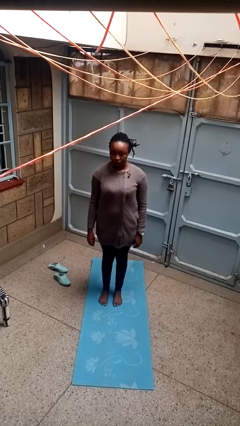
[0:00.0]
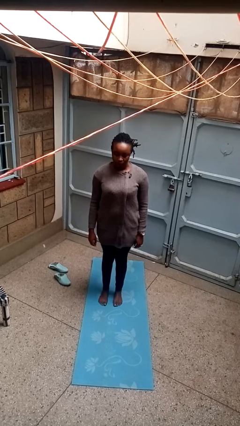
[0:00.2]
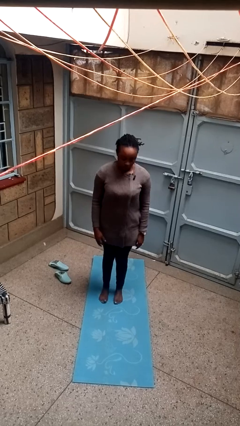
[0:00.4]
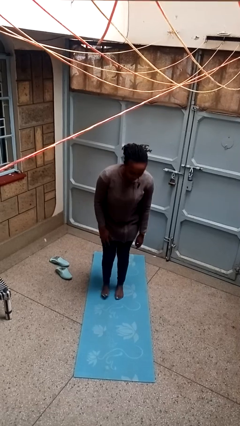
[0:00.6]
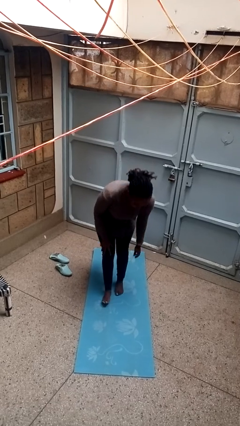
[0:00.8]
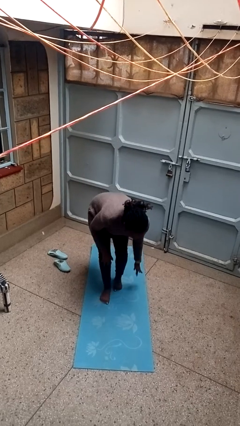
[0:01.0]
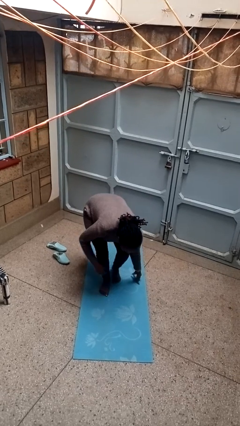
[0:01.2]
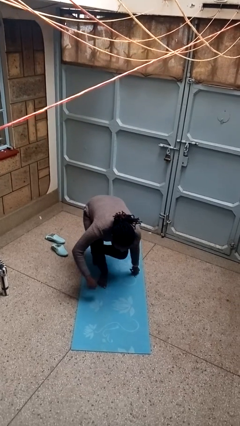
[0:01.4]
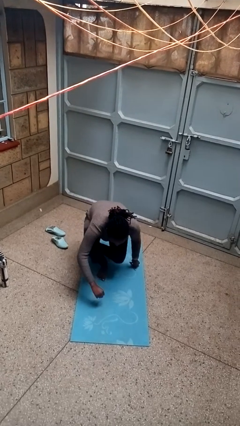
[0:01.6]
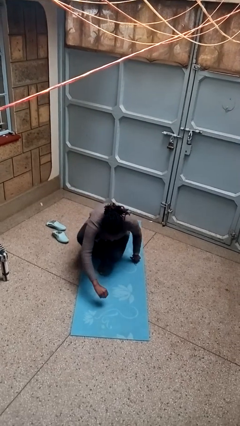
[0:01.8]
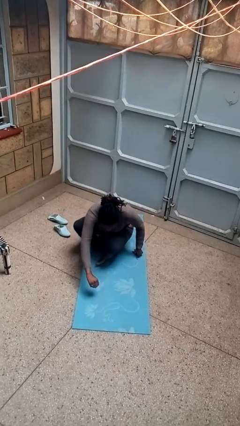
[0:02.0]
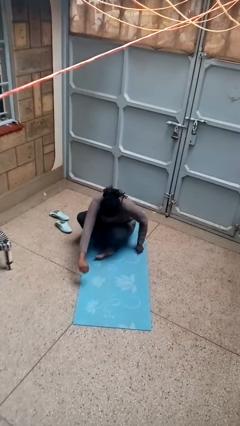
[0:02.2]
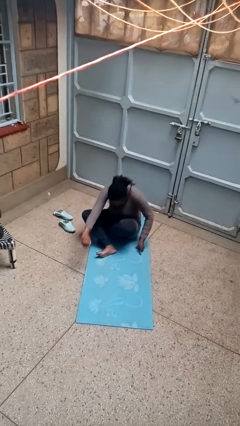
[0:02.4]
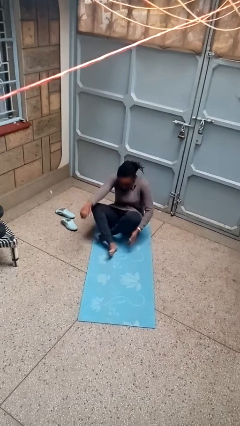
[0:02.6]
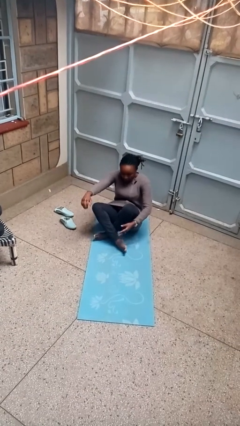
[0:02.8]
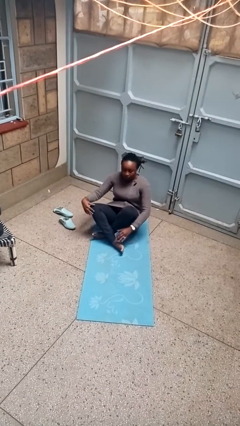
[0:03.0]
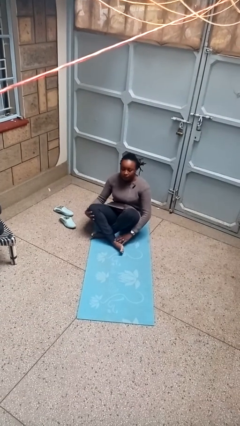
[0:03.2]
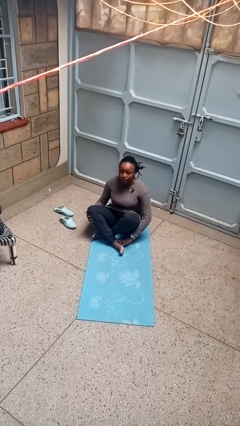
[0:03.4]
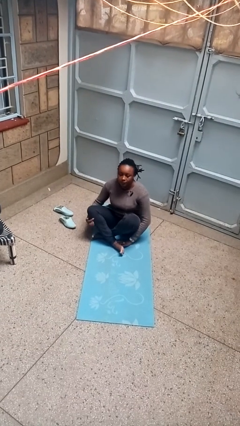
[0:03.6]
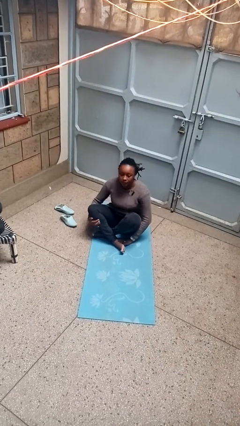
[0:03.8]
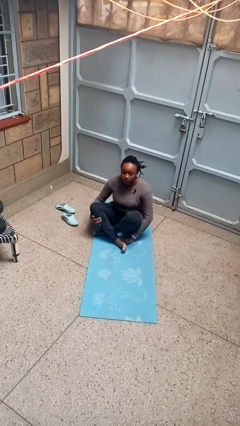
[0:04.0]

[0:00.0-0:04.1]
person sits crisscross

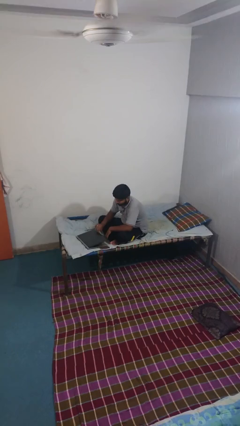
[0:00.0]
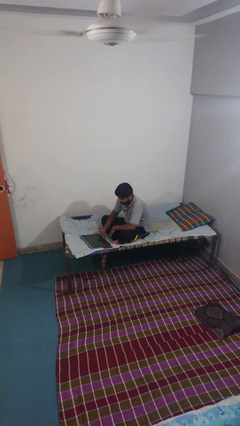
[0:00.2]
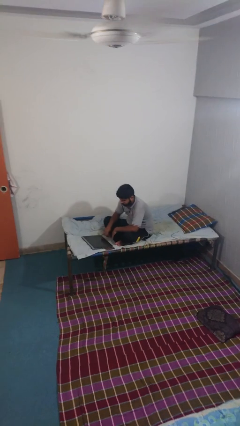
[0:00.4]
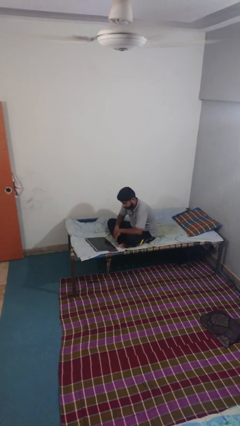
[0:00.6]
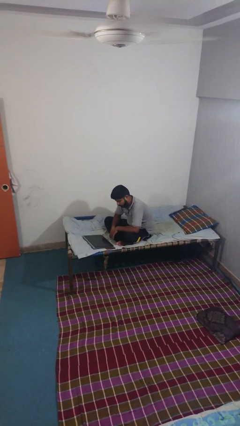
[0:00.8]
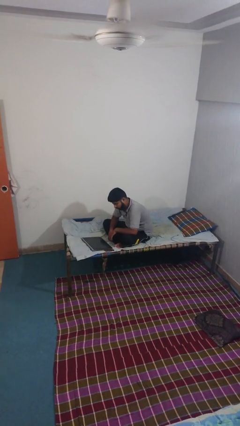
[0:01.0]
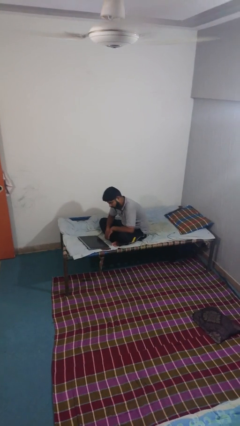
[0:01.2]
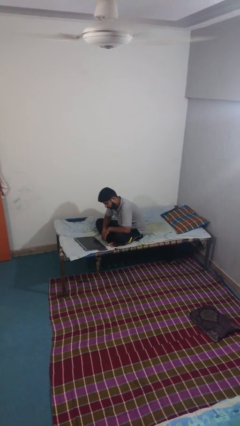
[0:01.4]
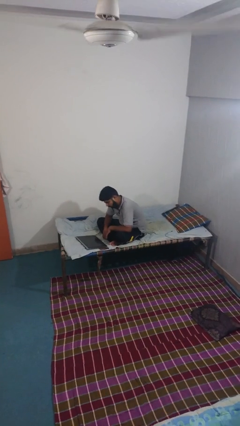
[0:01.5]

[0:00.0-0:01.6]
person closes laptop

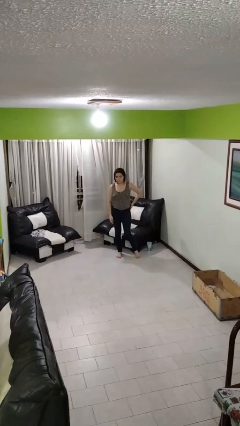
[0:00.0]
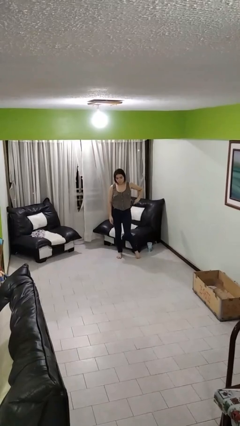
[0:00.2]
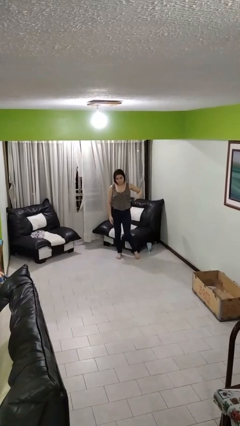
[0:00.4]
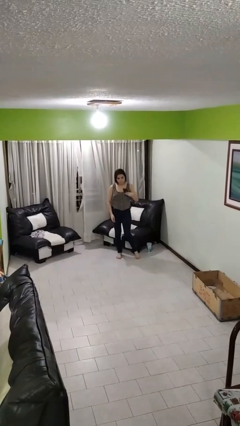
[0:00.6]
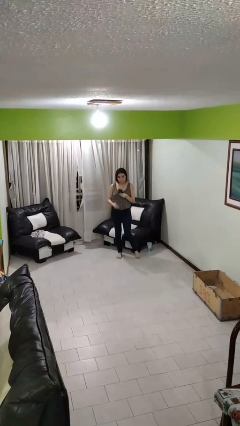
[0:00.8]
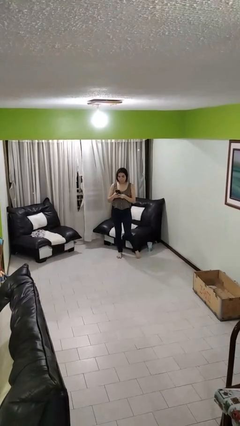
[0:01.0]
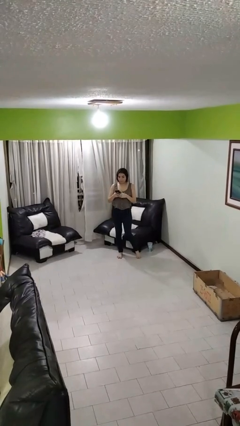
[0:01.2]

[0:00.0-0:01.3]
person takes phone from pocket

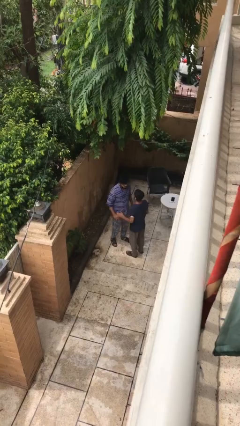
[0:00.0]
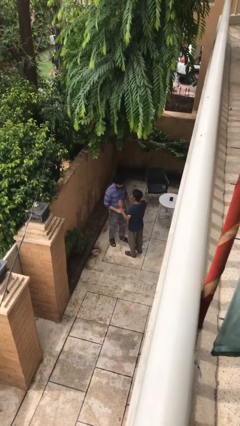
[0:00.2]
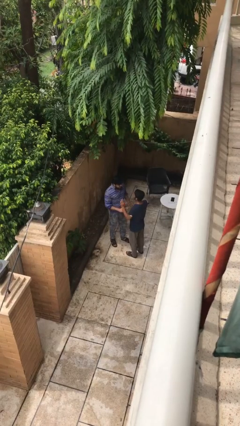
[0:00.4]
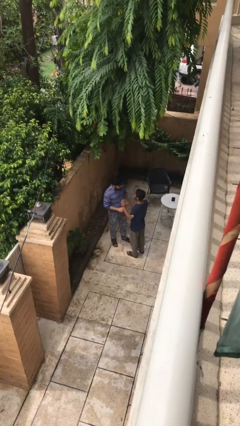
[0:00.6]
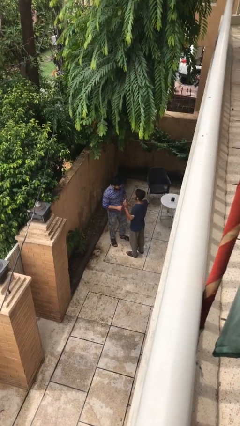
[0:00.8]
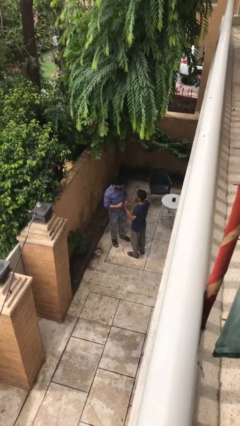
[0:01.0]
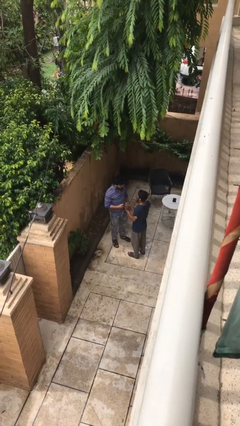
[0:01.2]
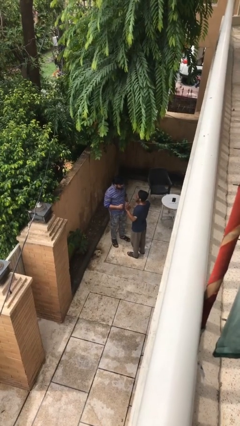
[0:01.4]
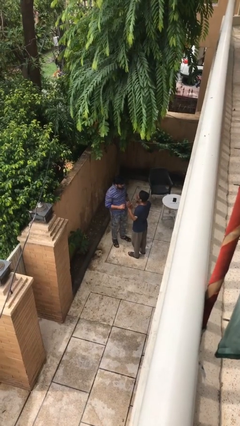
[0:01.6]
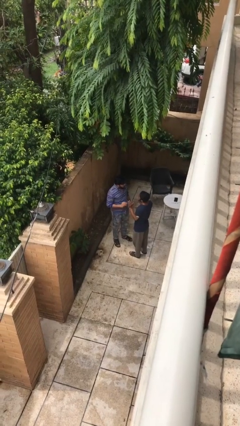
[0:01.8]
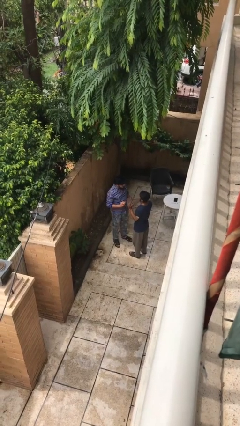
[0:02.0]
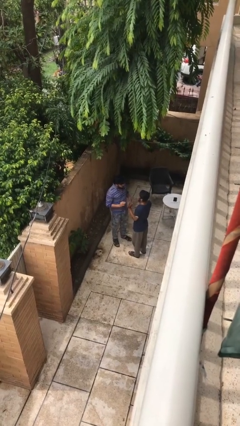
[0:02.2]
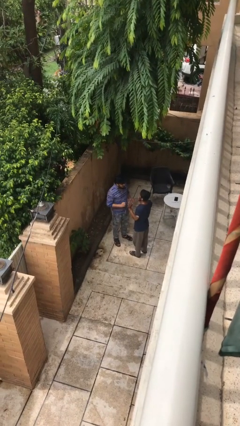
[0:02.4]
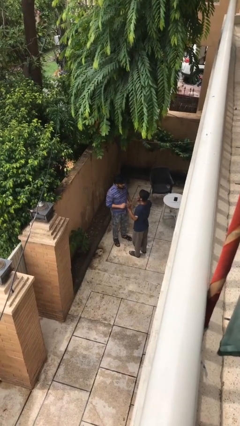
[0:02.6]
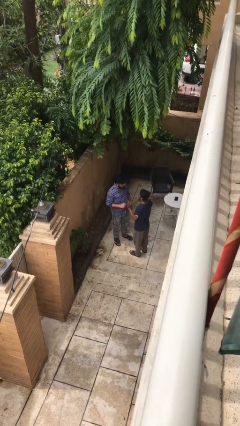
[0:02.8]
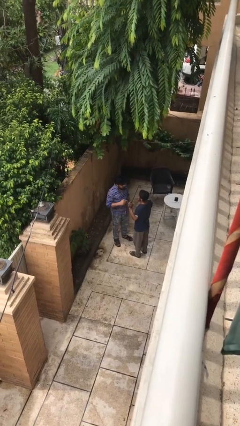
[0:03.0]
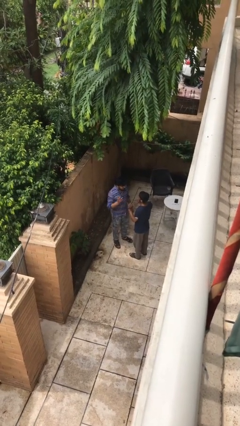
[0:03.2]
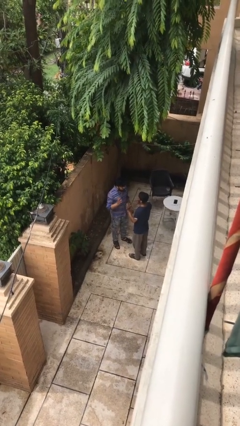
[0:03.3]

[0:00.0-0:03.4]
person talks to person

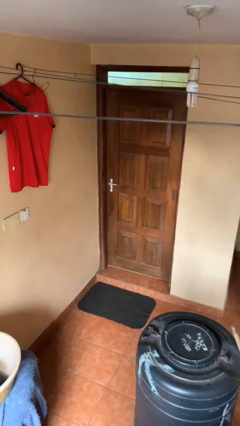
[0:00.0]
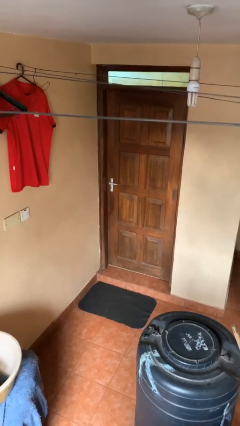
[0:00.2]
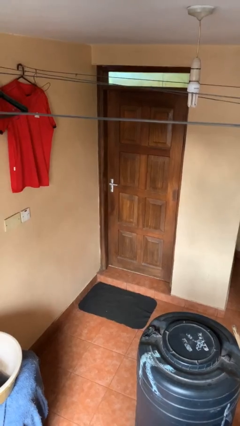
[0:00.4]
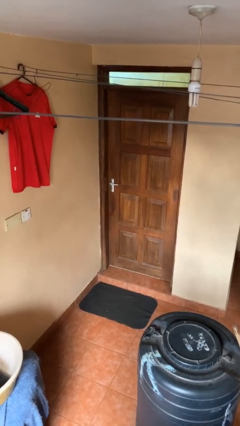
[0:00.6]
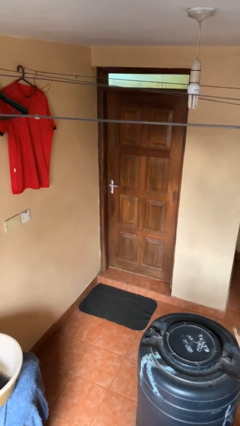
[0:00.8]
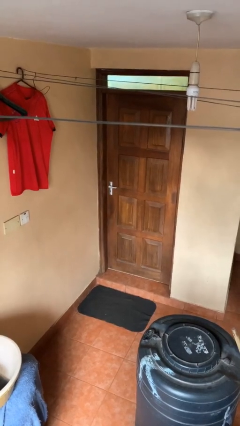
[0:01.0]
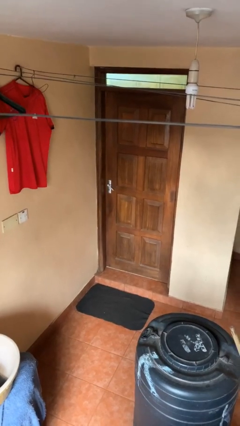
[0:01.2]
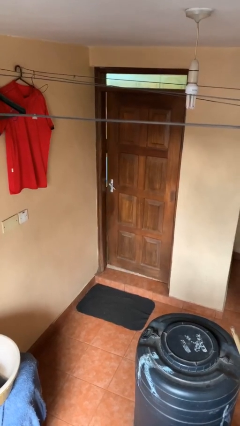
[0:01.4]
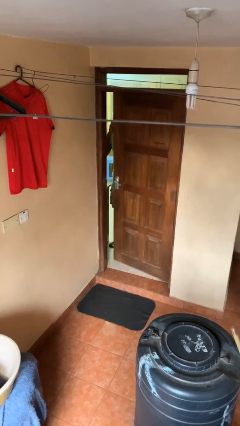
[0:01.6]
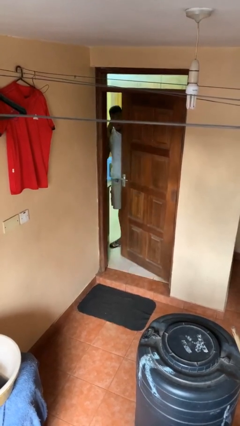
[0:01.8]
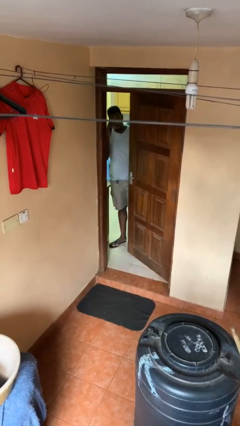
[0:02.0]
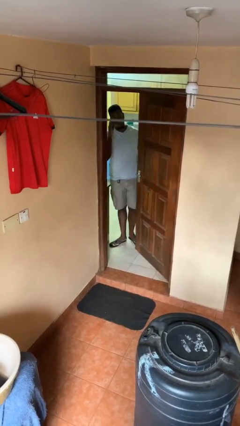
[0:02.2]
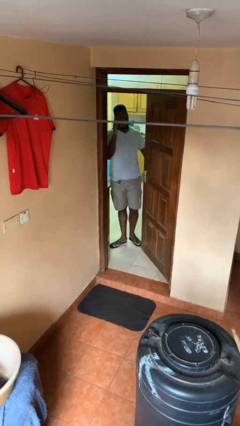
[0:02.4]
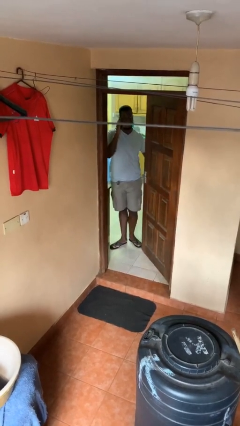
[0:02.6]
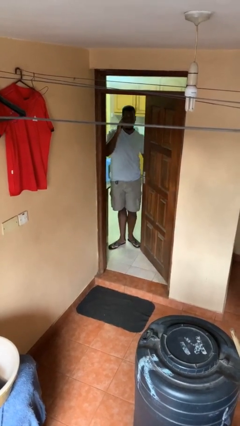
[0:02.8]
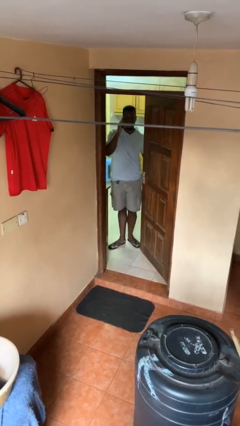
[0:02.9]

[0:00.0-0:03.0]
person opens facility door

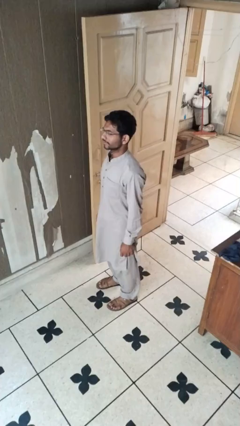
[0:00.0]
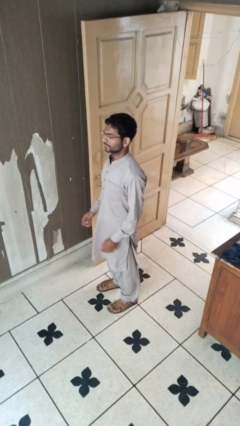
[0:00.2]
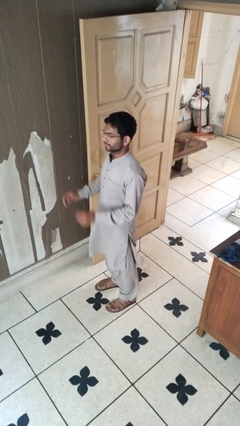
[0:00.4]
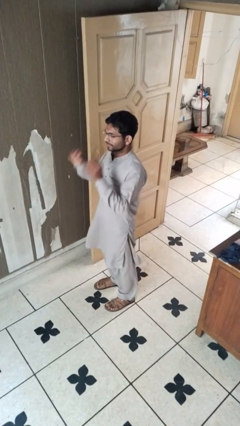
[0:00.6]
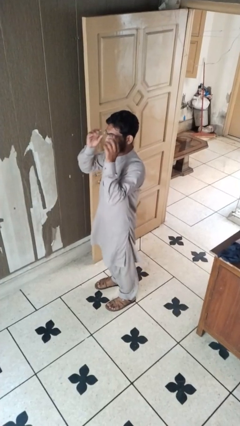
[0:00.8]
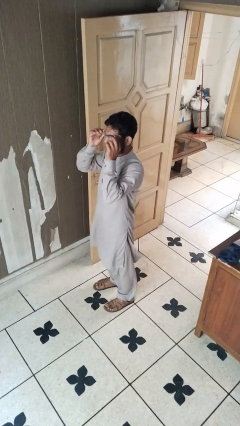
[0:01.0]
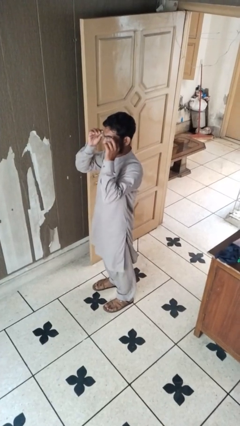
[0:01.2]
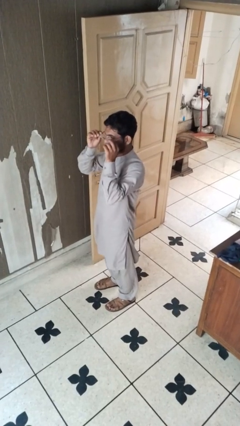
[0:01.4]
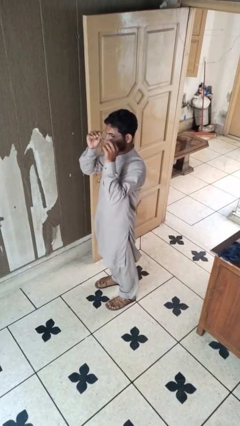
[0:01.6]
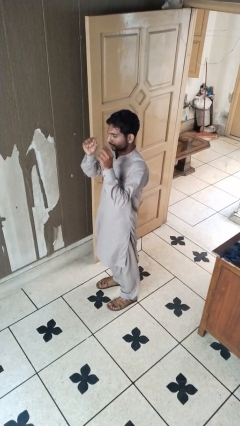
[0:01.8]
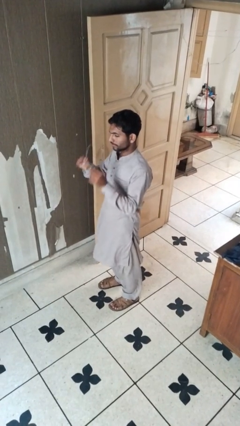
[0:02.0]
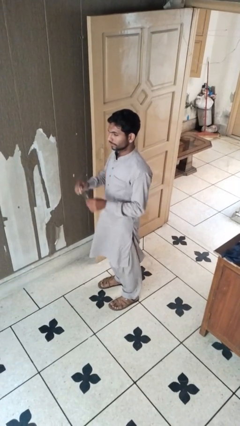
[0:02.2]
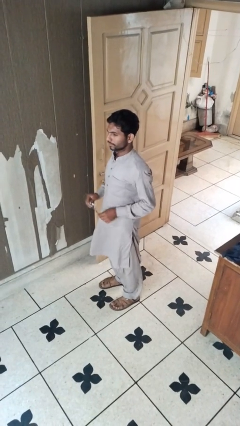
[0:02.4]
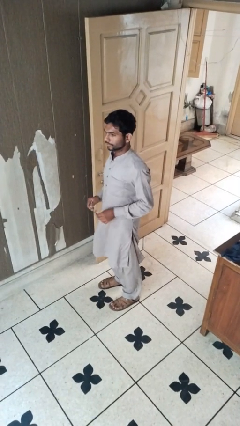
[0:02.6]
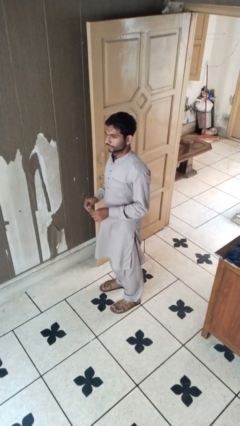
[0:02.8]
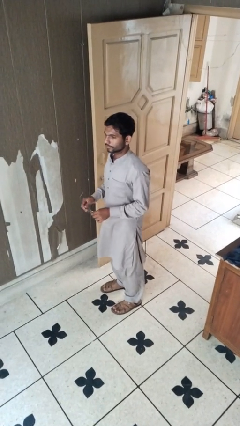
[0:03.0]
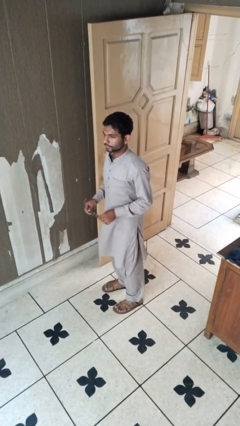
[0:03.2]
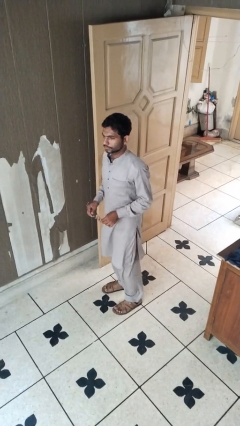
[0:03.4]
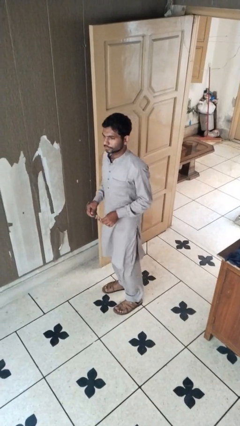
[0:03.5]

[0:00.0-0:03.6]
person takes off glasses

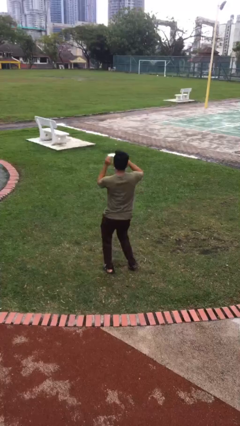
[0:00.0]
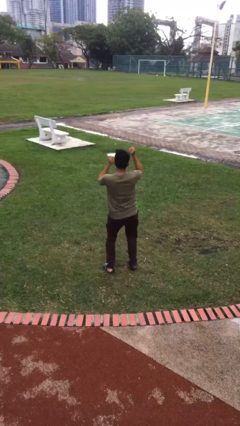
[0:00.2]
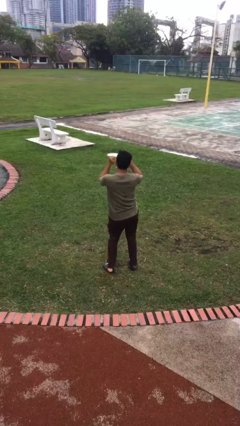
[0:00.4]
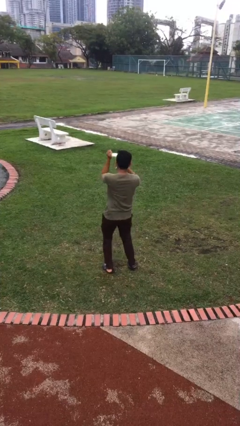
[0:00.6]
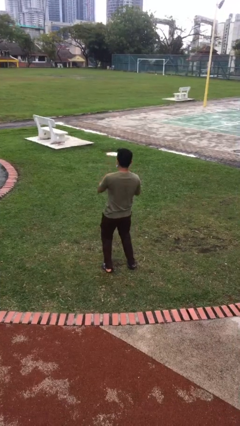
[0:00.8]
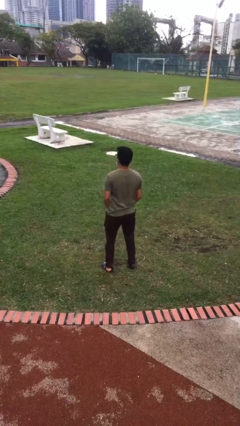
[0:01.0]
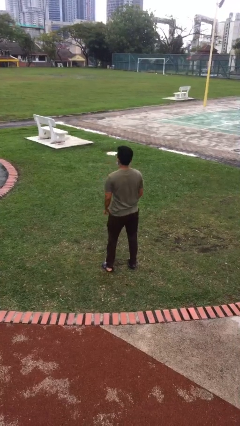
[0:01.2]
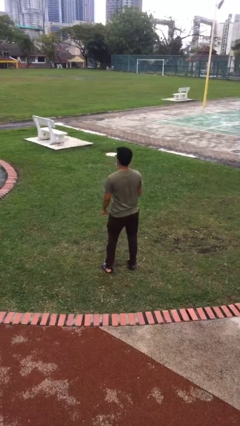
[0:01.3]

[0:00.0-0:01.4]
person dances in place
